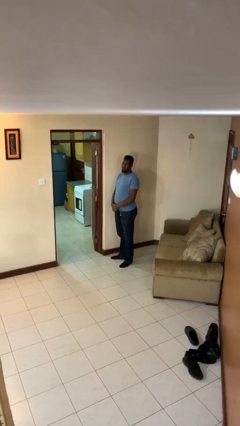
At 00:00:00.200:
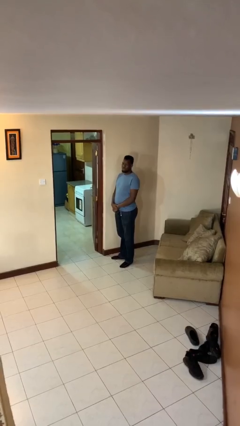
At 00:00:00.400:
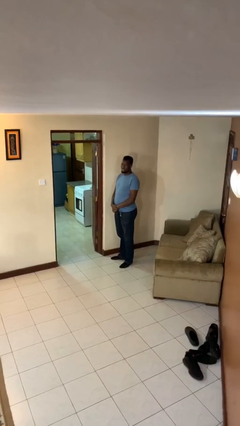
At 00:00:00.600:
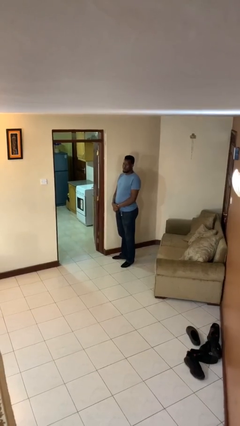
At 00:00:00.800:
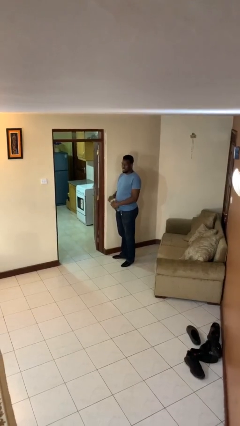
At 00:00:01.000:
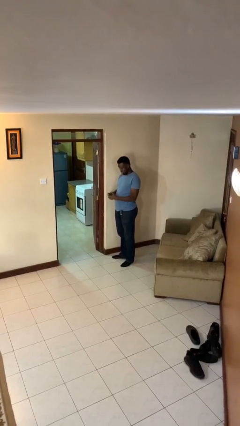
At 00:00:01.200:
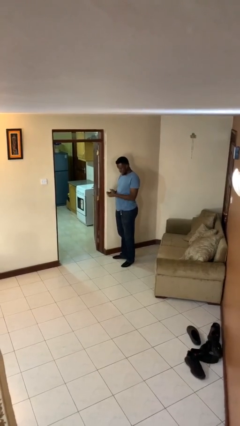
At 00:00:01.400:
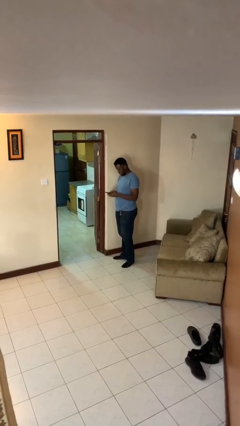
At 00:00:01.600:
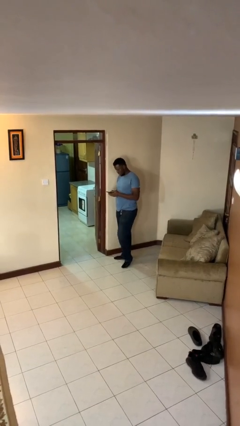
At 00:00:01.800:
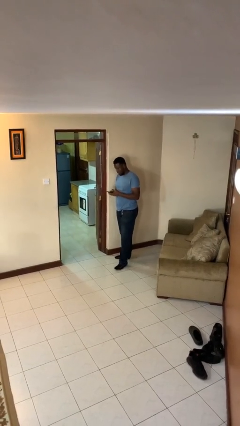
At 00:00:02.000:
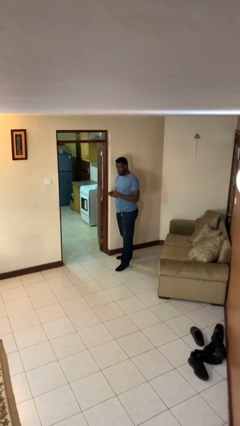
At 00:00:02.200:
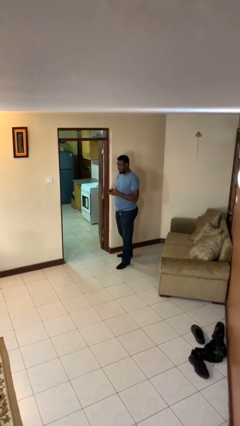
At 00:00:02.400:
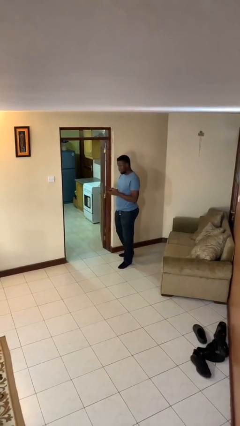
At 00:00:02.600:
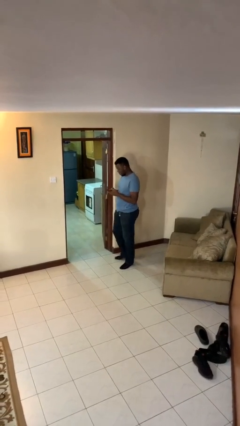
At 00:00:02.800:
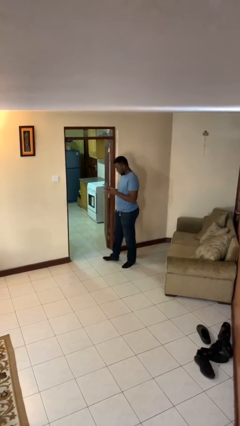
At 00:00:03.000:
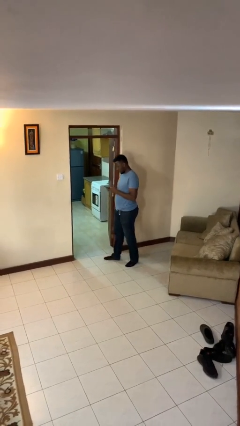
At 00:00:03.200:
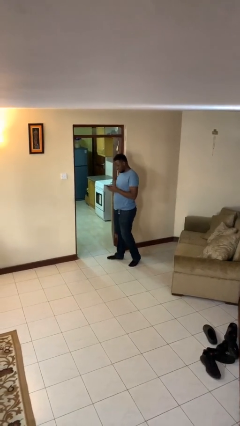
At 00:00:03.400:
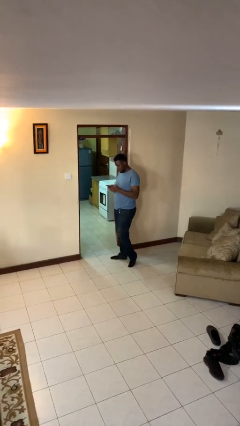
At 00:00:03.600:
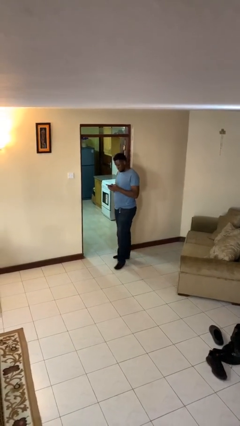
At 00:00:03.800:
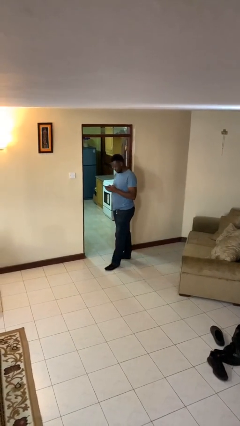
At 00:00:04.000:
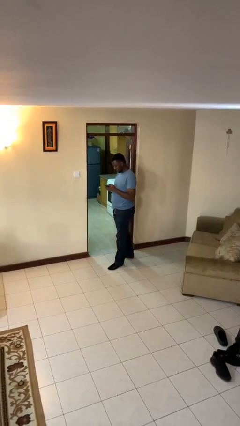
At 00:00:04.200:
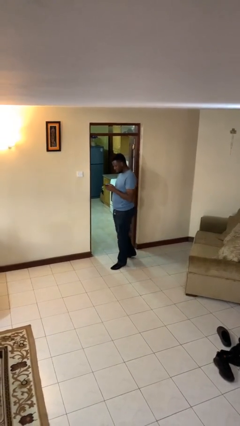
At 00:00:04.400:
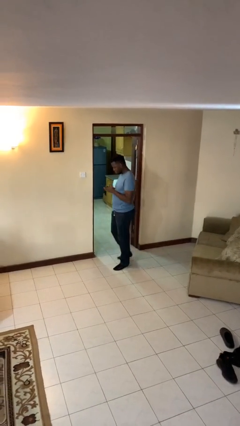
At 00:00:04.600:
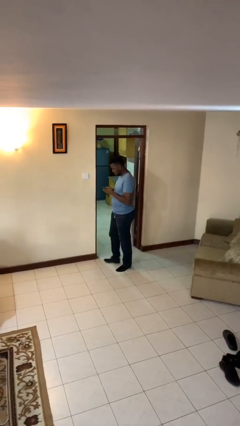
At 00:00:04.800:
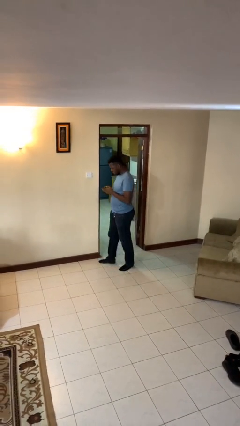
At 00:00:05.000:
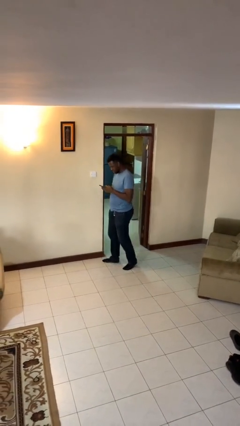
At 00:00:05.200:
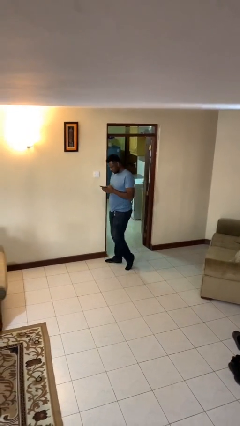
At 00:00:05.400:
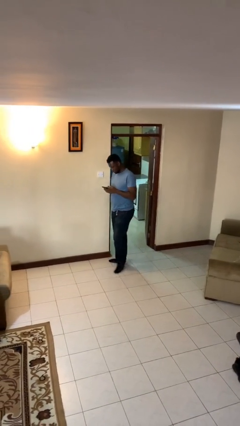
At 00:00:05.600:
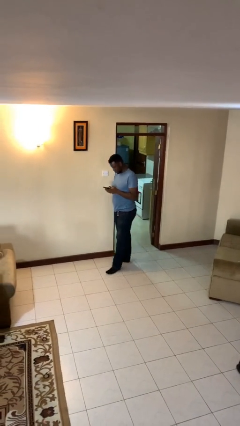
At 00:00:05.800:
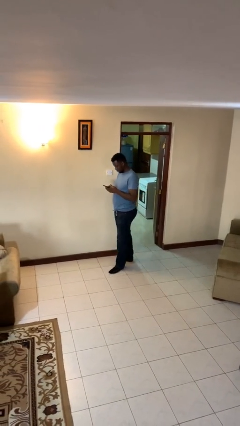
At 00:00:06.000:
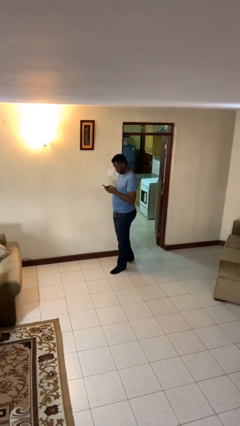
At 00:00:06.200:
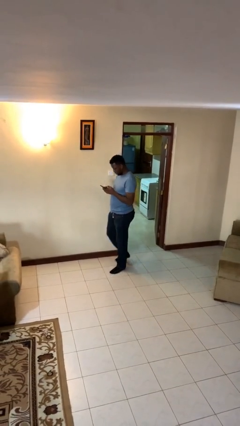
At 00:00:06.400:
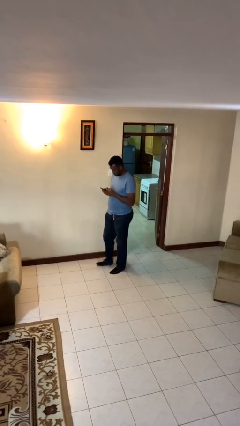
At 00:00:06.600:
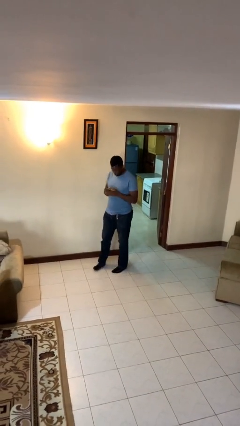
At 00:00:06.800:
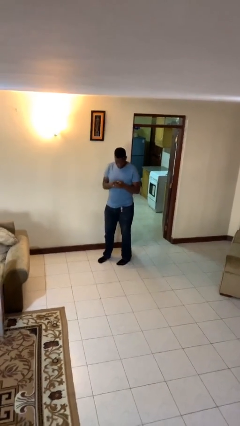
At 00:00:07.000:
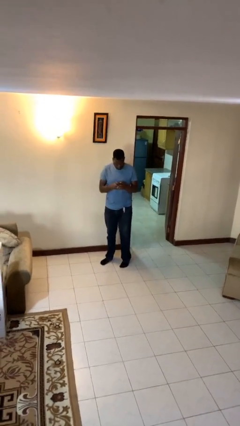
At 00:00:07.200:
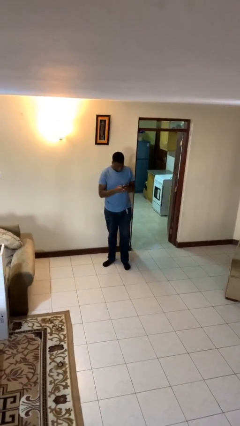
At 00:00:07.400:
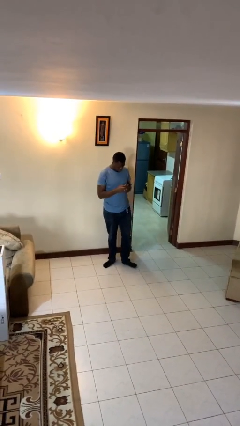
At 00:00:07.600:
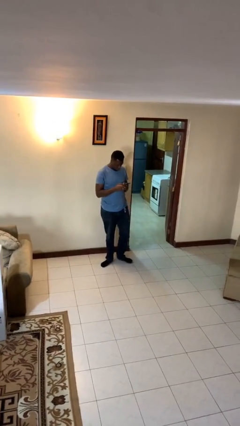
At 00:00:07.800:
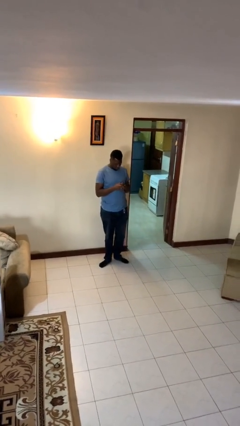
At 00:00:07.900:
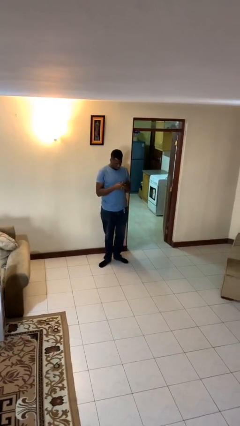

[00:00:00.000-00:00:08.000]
person texts on phone

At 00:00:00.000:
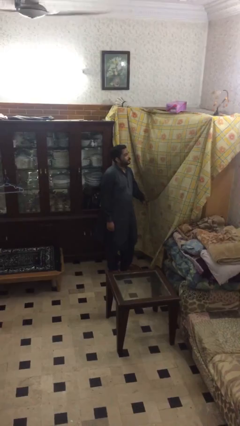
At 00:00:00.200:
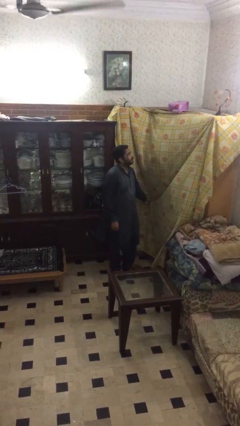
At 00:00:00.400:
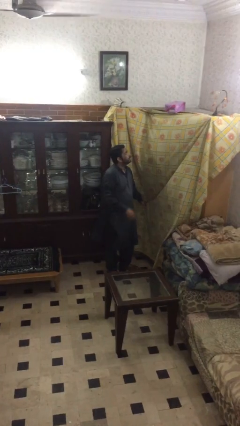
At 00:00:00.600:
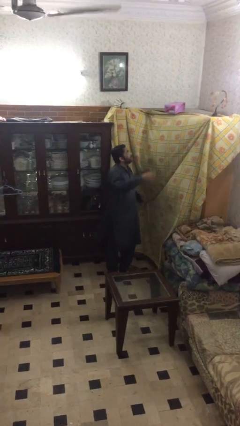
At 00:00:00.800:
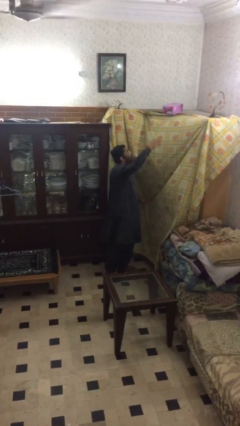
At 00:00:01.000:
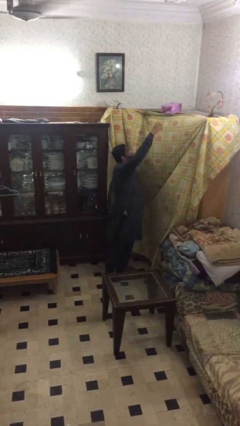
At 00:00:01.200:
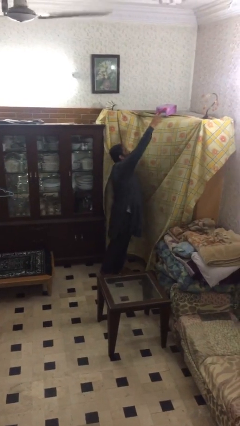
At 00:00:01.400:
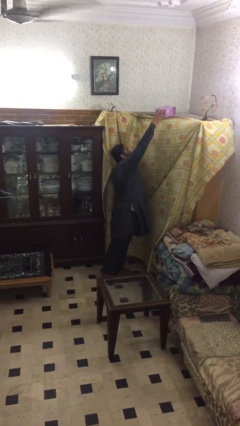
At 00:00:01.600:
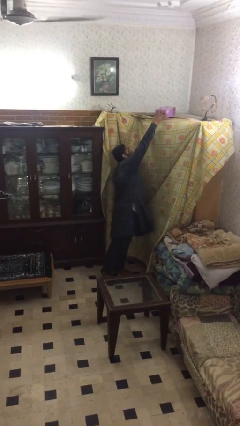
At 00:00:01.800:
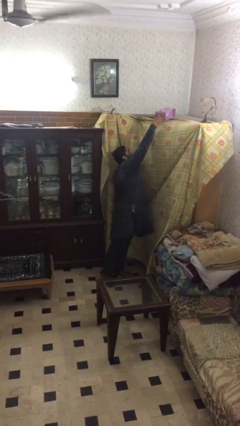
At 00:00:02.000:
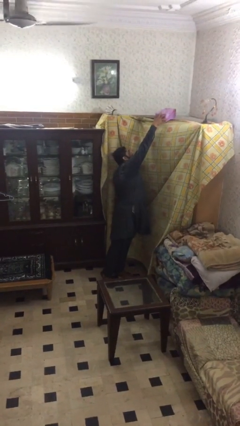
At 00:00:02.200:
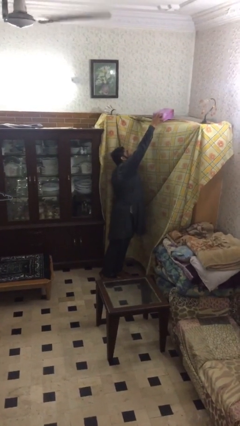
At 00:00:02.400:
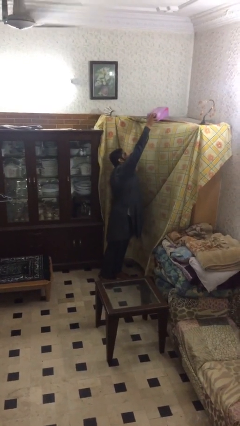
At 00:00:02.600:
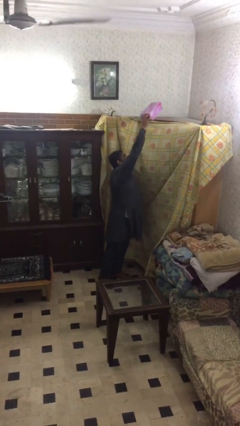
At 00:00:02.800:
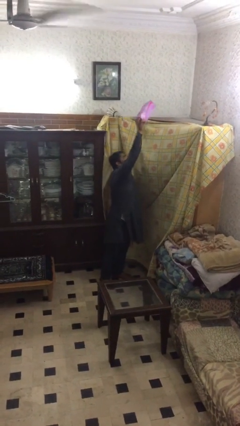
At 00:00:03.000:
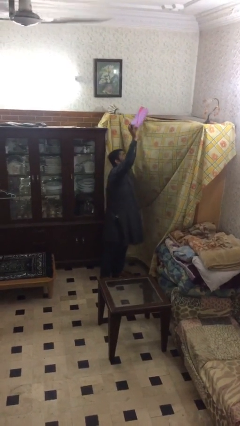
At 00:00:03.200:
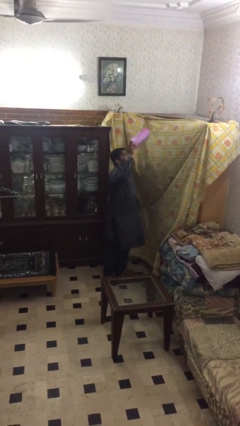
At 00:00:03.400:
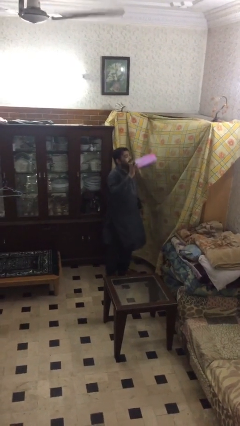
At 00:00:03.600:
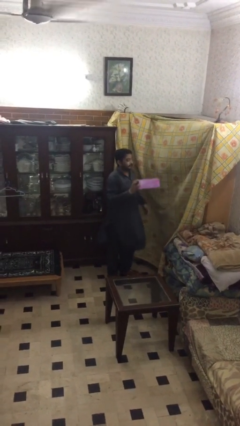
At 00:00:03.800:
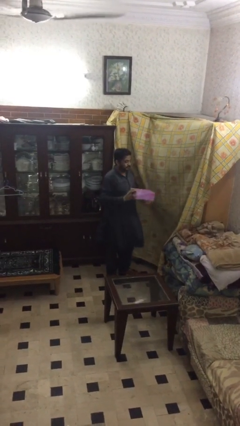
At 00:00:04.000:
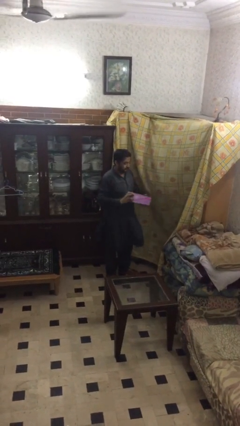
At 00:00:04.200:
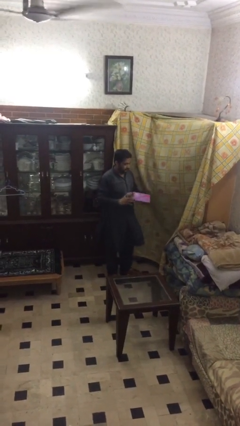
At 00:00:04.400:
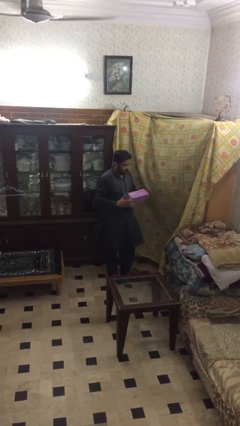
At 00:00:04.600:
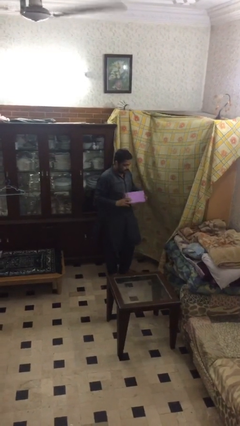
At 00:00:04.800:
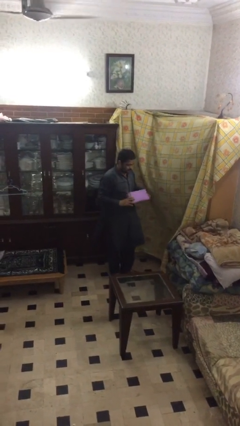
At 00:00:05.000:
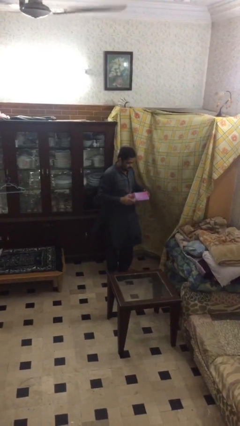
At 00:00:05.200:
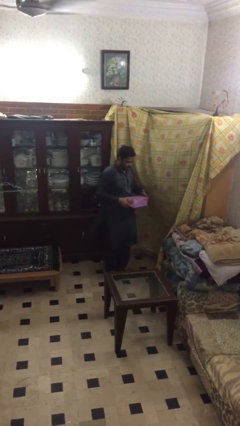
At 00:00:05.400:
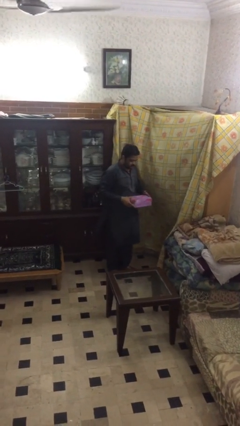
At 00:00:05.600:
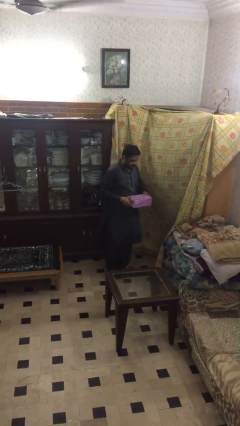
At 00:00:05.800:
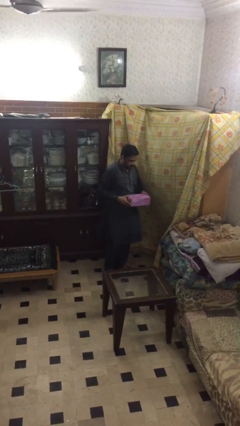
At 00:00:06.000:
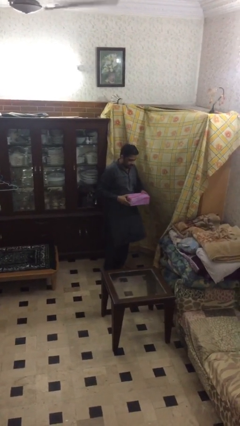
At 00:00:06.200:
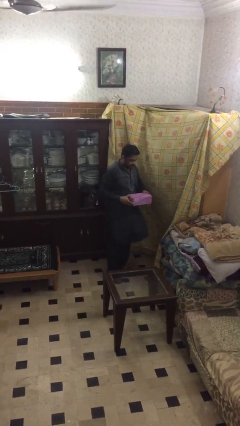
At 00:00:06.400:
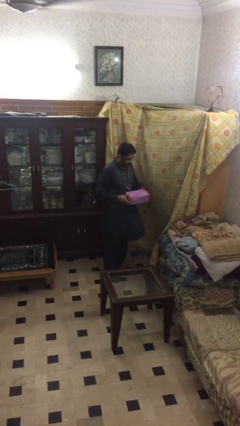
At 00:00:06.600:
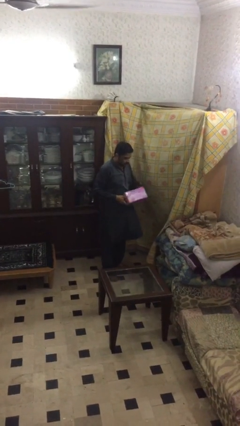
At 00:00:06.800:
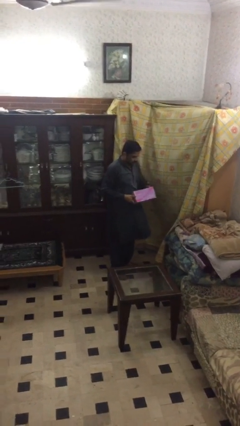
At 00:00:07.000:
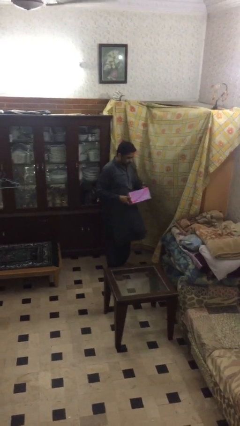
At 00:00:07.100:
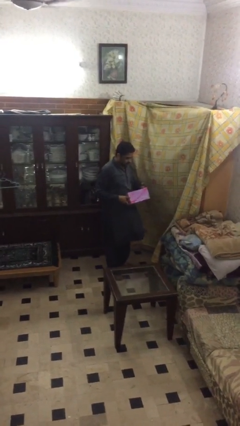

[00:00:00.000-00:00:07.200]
person picks up object from shelf

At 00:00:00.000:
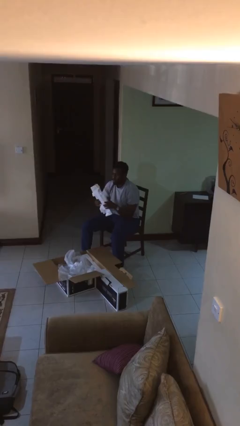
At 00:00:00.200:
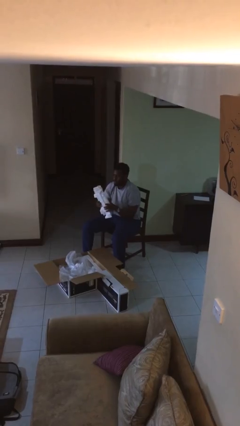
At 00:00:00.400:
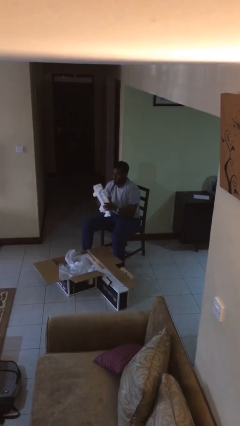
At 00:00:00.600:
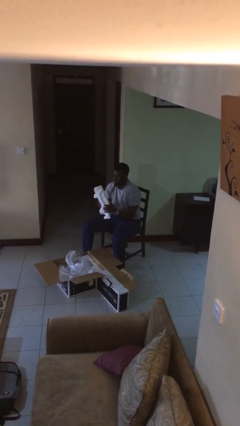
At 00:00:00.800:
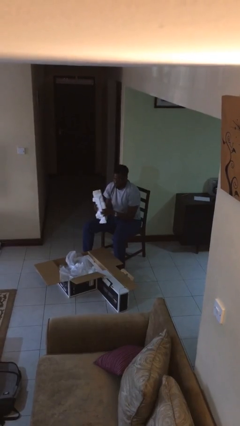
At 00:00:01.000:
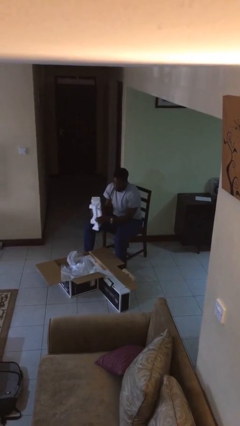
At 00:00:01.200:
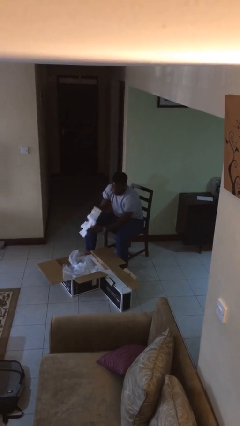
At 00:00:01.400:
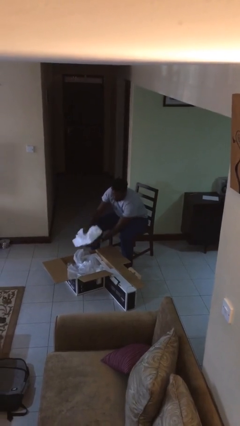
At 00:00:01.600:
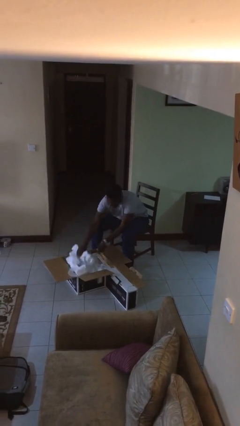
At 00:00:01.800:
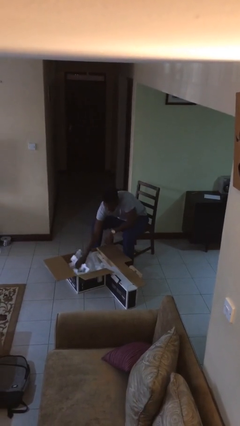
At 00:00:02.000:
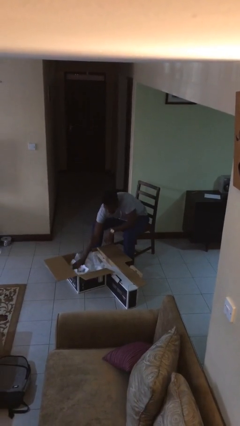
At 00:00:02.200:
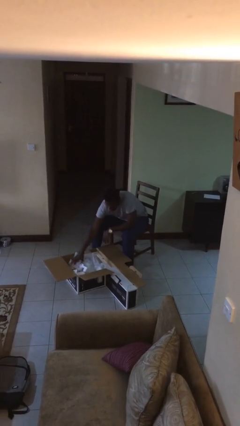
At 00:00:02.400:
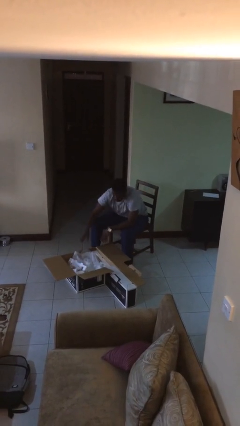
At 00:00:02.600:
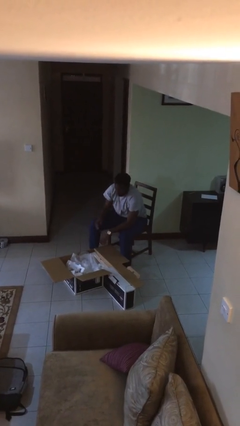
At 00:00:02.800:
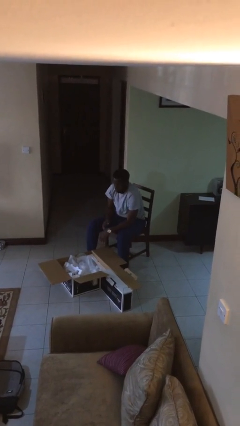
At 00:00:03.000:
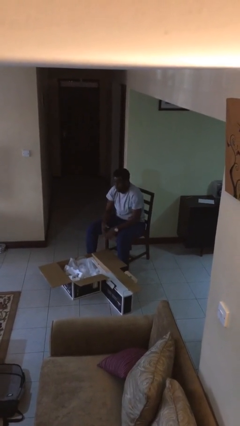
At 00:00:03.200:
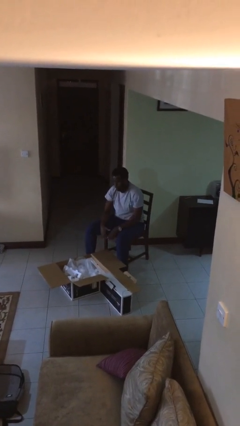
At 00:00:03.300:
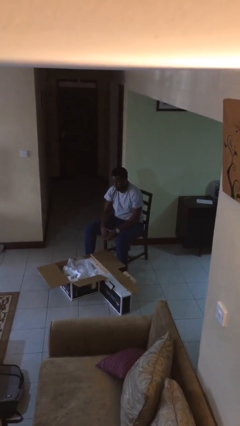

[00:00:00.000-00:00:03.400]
person puts object into box
